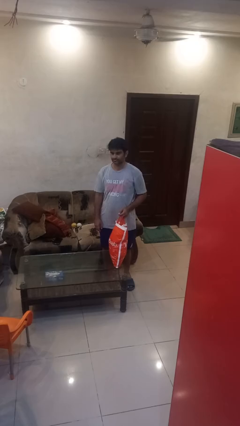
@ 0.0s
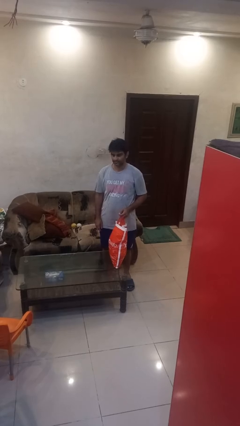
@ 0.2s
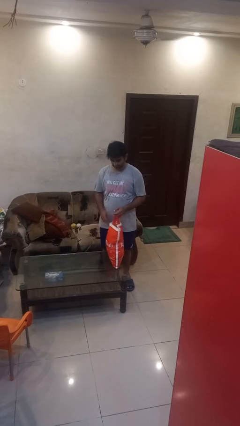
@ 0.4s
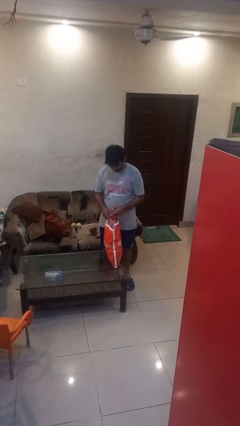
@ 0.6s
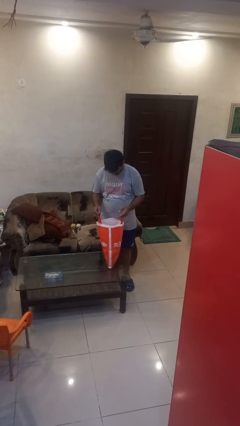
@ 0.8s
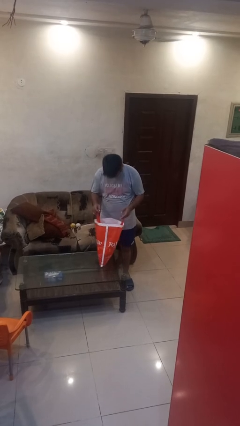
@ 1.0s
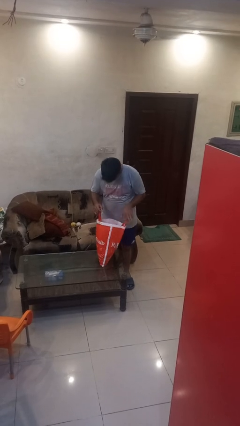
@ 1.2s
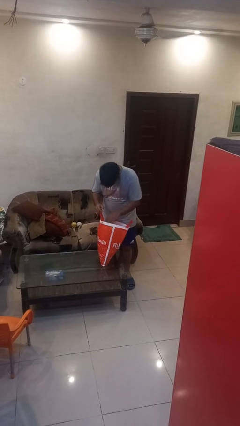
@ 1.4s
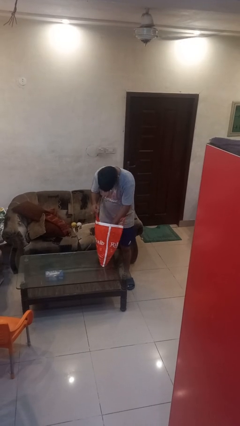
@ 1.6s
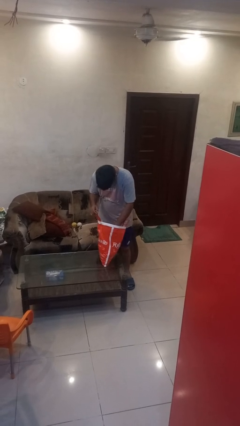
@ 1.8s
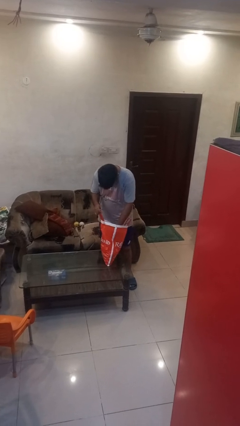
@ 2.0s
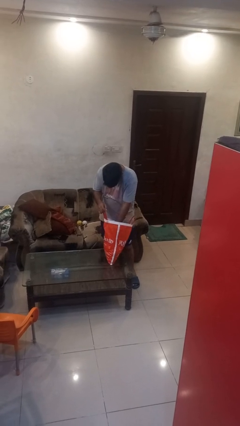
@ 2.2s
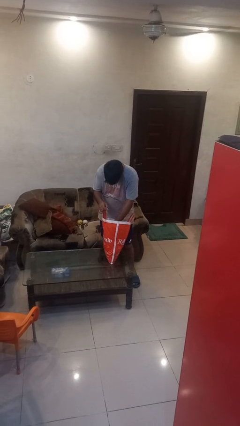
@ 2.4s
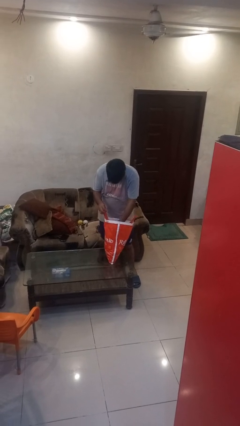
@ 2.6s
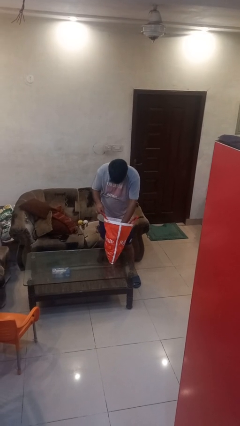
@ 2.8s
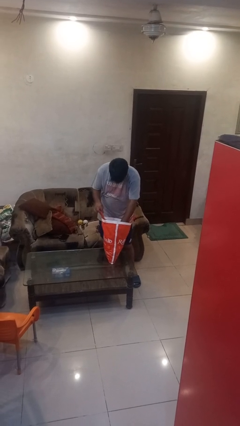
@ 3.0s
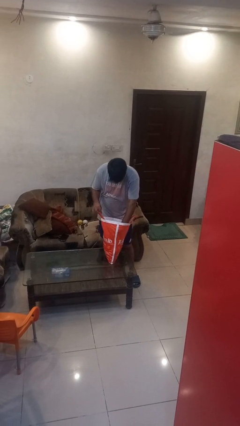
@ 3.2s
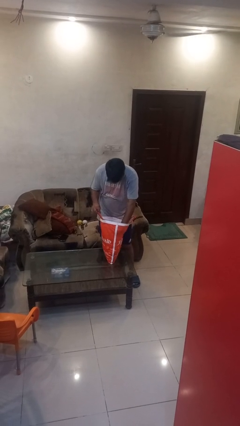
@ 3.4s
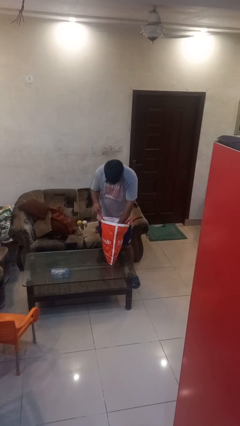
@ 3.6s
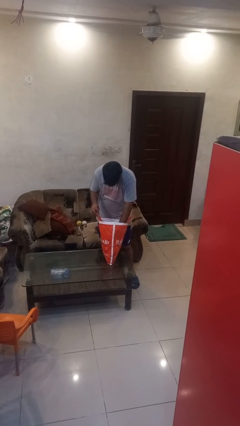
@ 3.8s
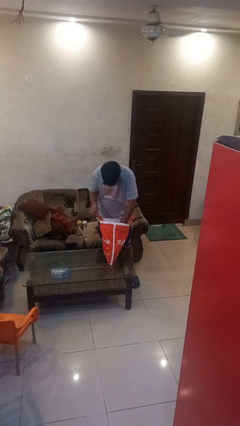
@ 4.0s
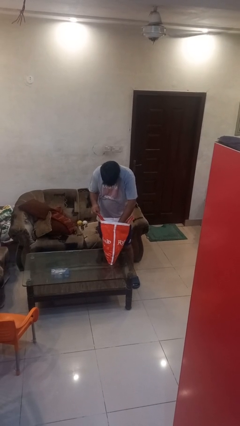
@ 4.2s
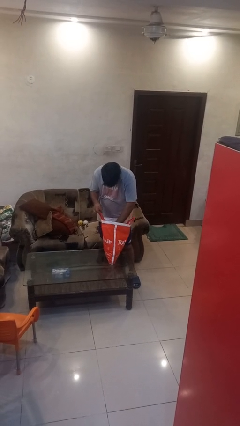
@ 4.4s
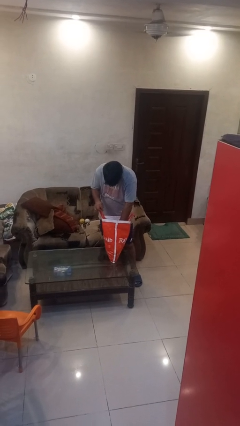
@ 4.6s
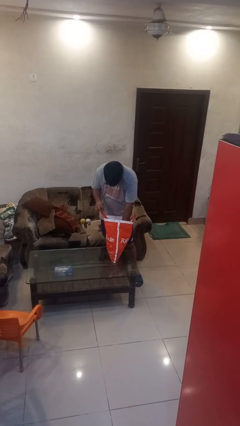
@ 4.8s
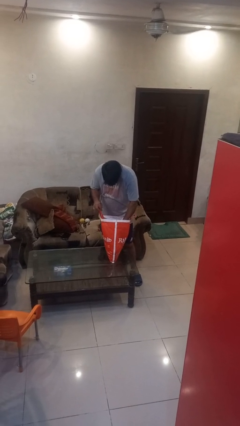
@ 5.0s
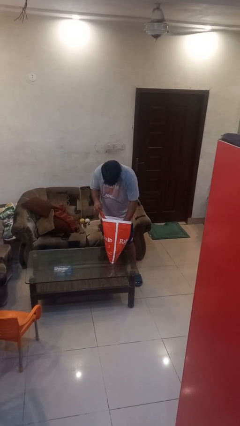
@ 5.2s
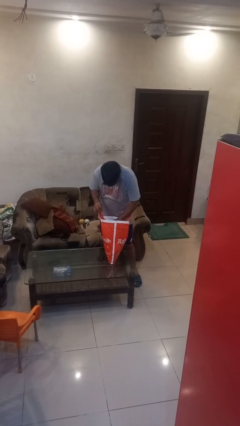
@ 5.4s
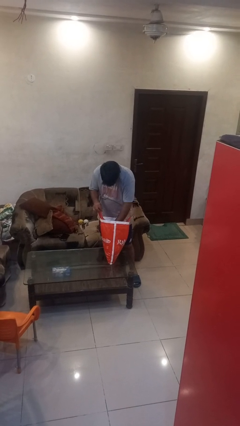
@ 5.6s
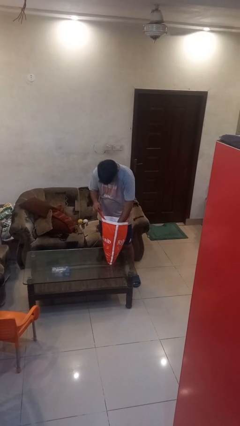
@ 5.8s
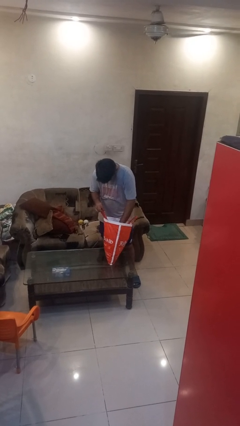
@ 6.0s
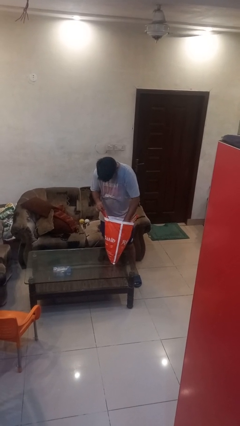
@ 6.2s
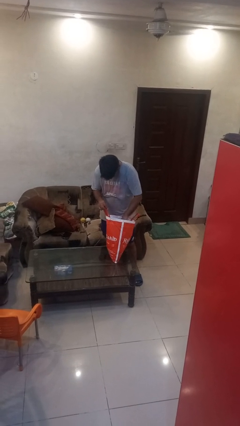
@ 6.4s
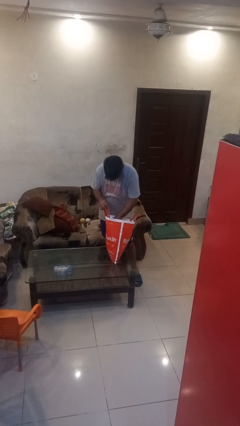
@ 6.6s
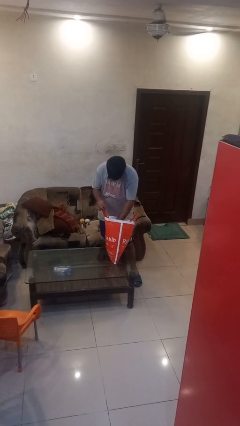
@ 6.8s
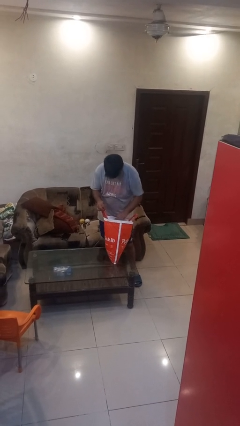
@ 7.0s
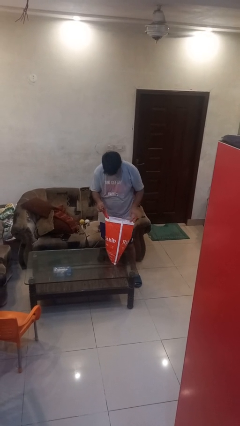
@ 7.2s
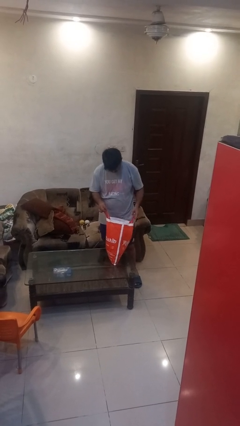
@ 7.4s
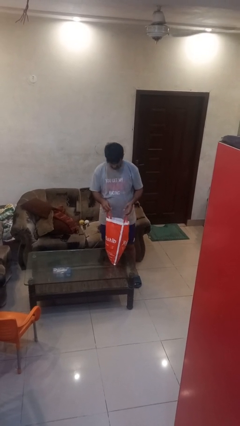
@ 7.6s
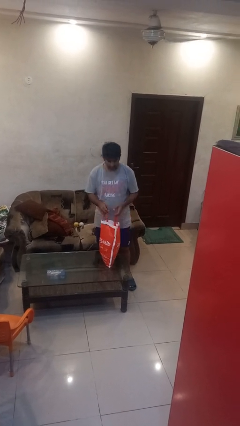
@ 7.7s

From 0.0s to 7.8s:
person searches in bag

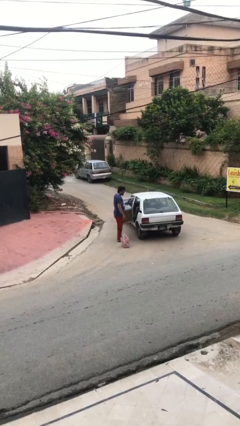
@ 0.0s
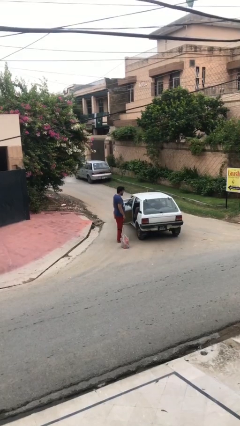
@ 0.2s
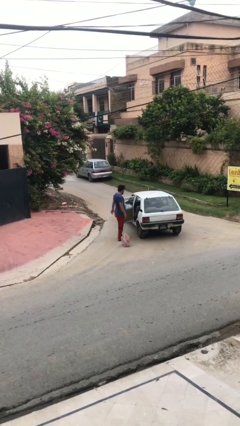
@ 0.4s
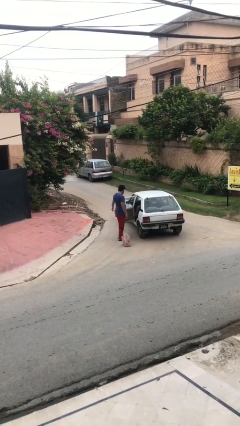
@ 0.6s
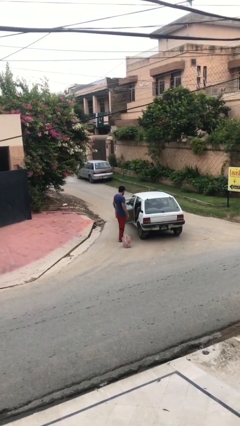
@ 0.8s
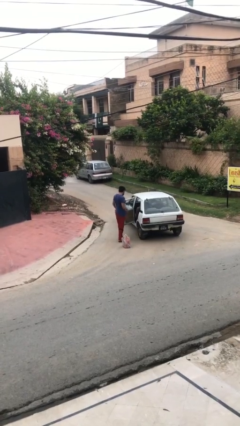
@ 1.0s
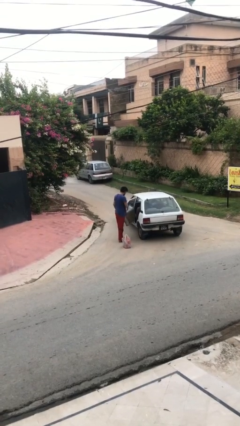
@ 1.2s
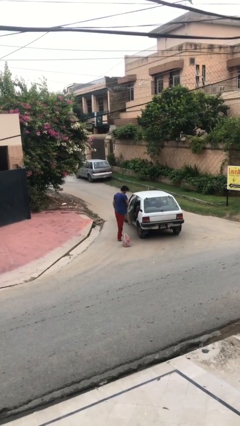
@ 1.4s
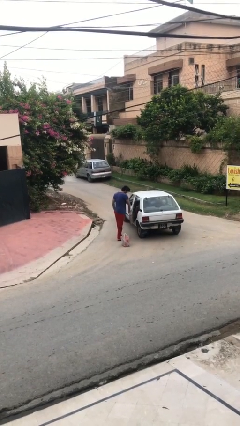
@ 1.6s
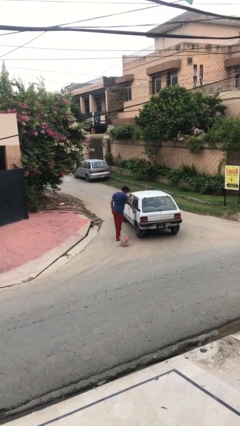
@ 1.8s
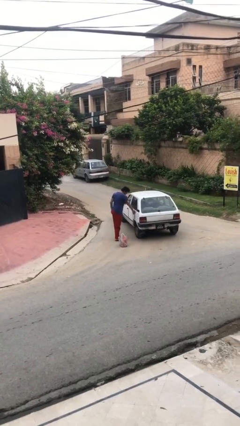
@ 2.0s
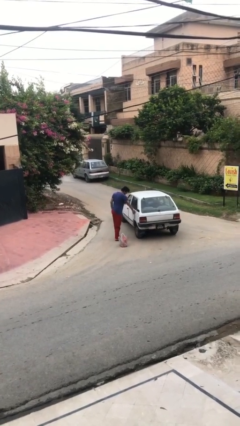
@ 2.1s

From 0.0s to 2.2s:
person closes car door

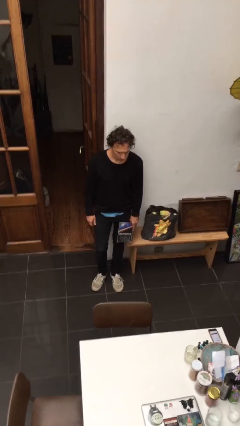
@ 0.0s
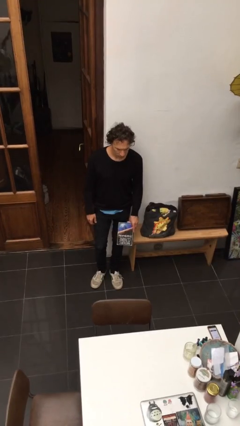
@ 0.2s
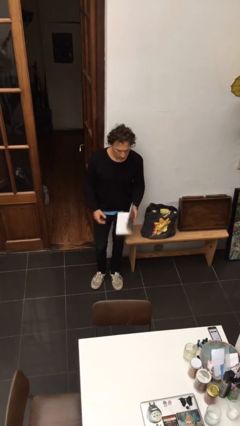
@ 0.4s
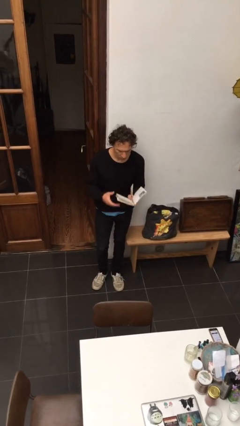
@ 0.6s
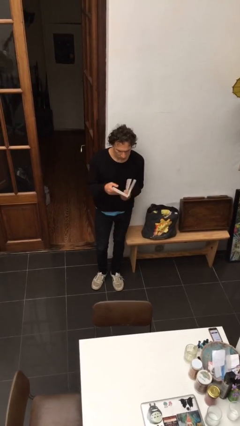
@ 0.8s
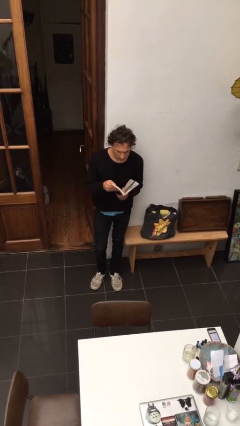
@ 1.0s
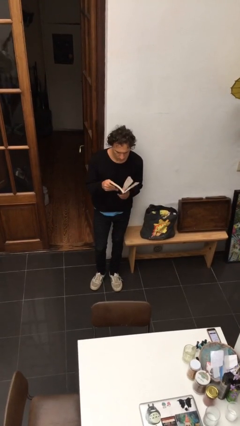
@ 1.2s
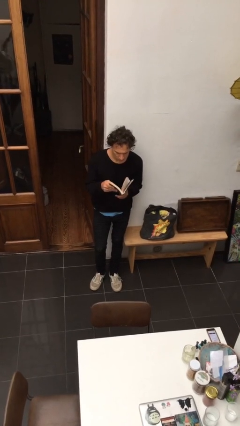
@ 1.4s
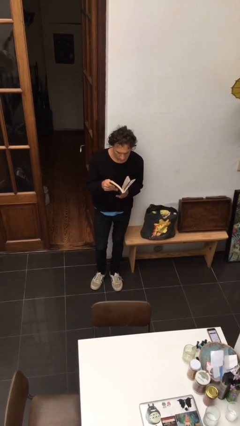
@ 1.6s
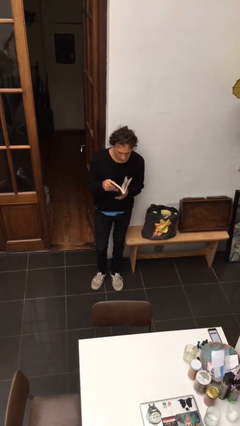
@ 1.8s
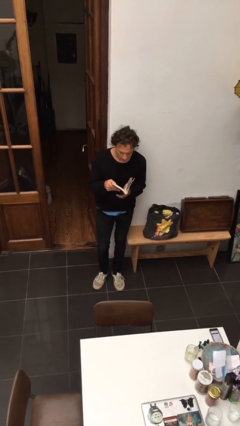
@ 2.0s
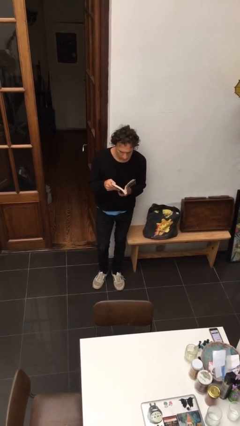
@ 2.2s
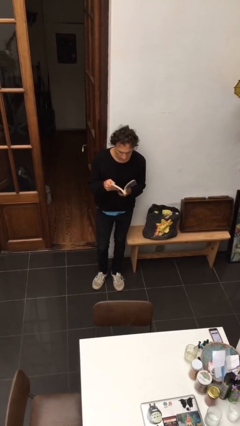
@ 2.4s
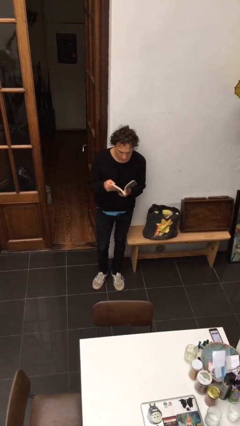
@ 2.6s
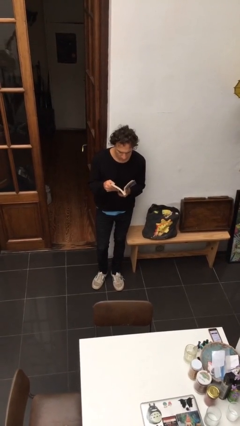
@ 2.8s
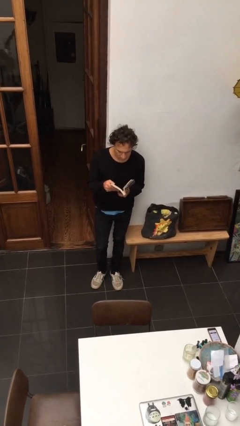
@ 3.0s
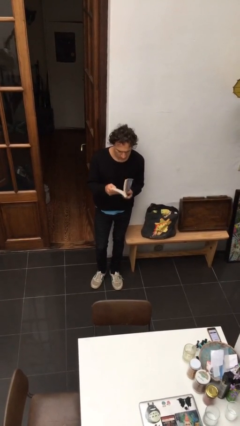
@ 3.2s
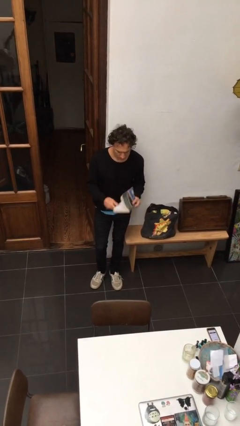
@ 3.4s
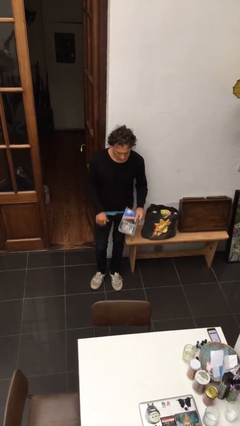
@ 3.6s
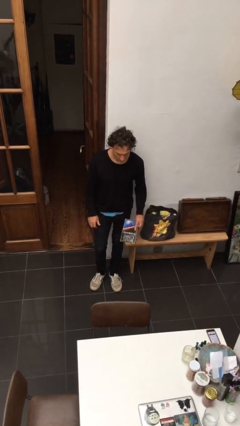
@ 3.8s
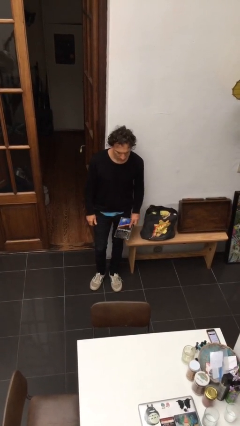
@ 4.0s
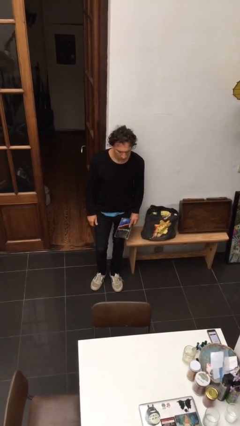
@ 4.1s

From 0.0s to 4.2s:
person reads document

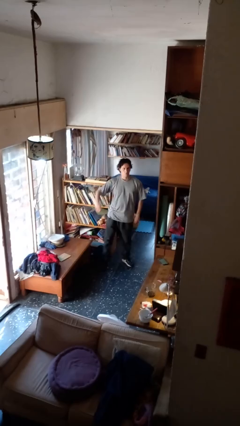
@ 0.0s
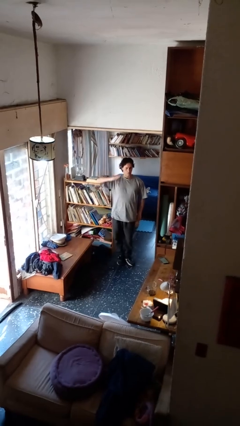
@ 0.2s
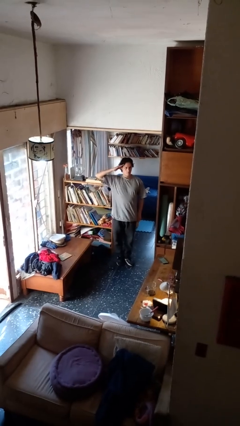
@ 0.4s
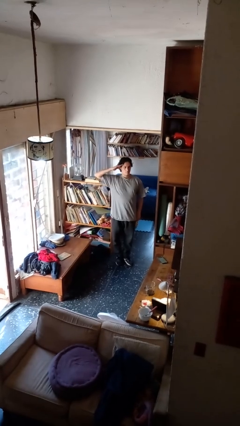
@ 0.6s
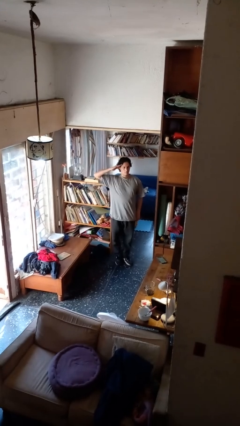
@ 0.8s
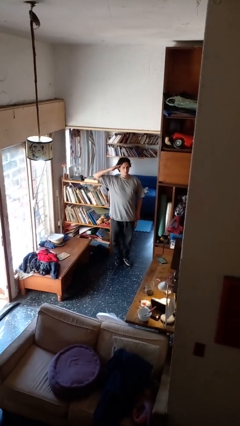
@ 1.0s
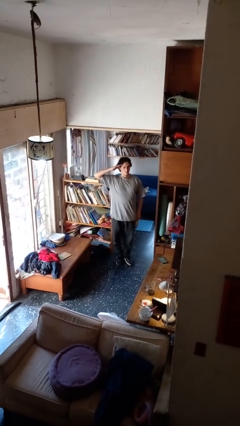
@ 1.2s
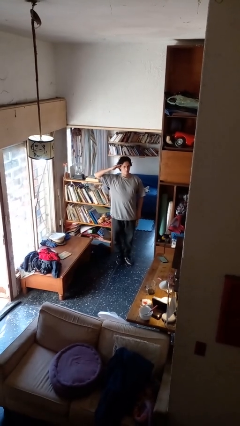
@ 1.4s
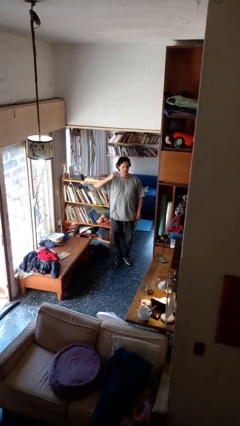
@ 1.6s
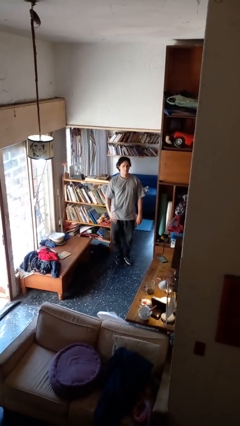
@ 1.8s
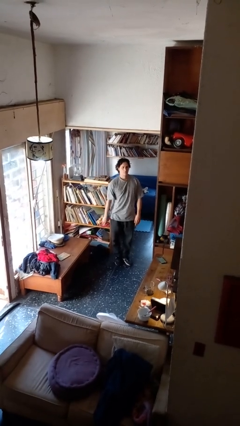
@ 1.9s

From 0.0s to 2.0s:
person salutes

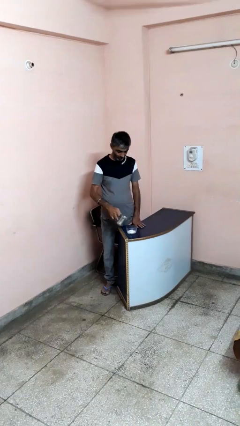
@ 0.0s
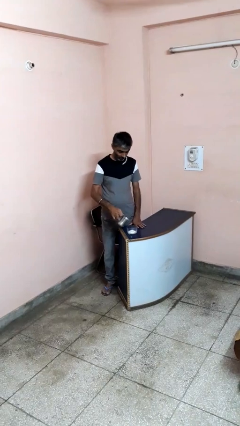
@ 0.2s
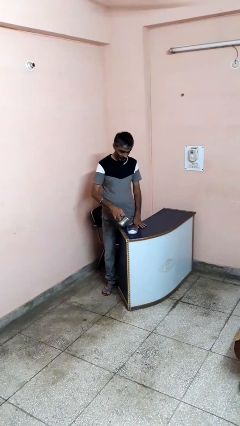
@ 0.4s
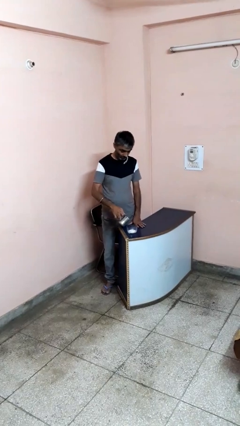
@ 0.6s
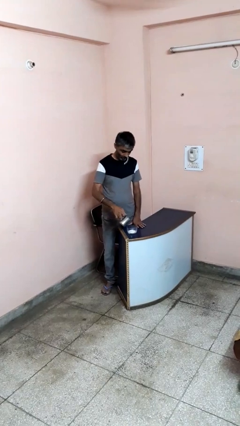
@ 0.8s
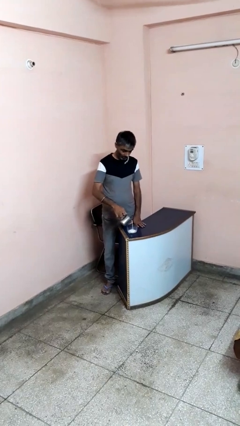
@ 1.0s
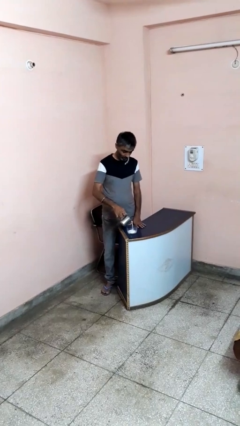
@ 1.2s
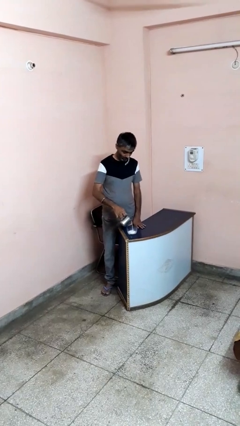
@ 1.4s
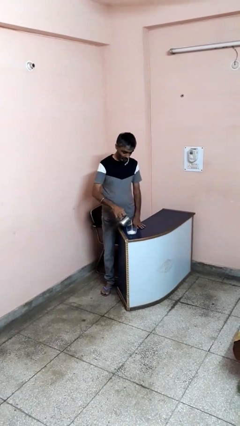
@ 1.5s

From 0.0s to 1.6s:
person pours into bowl
